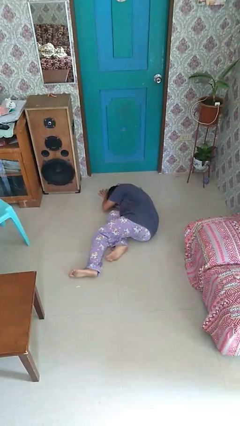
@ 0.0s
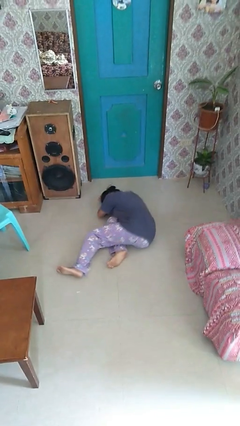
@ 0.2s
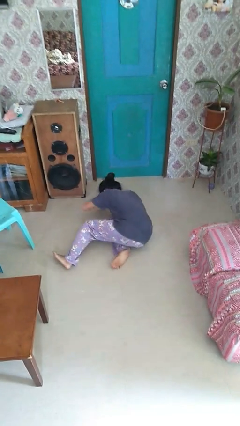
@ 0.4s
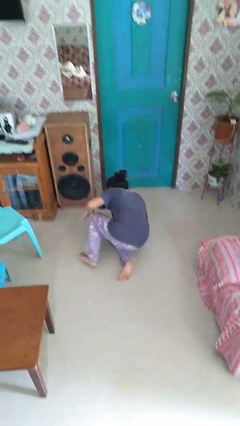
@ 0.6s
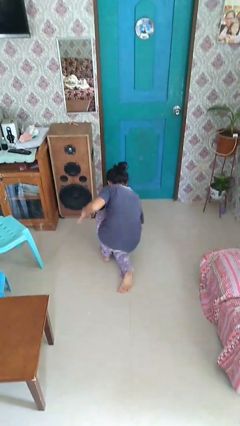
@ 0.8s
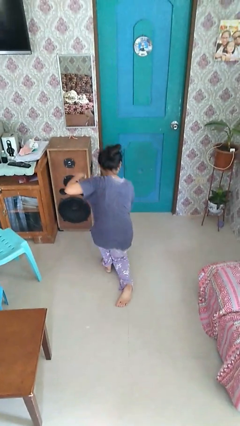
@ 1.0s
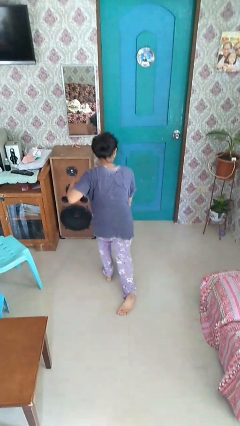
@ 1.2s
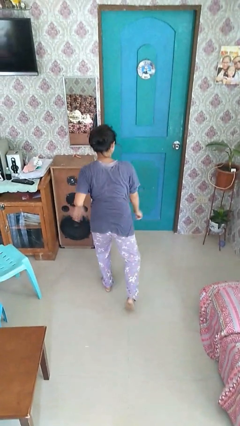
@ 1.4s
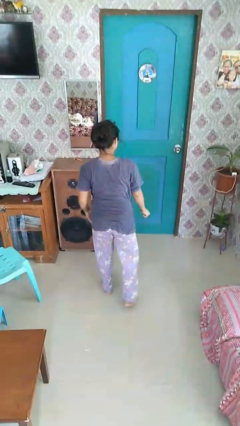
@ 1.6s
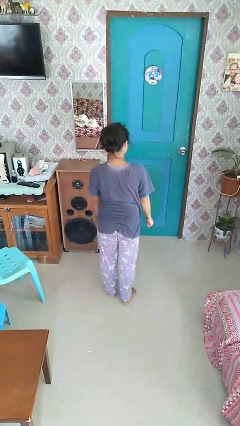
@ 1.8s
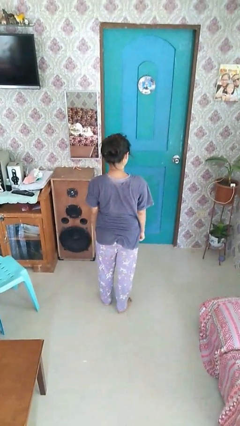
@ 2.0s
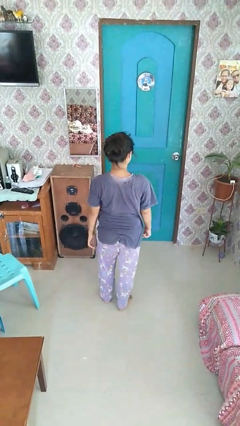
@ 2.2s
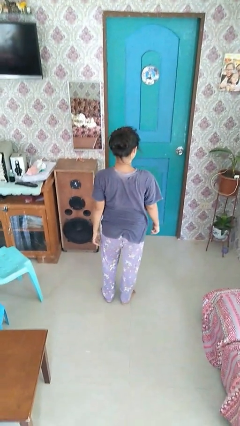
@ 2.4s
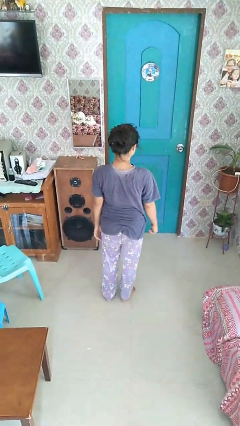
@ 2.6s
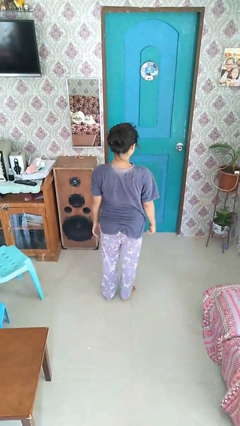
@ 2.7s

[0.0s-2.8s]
person stands up from floor

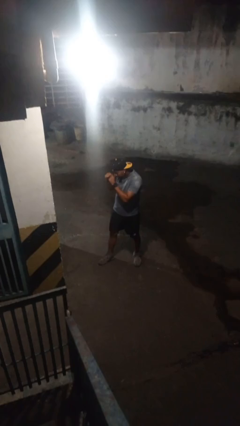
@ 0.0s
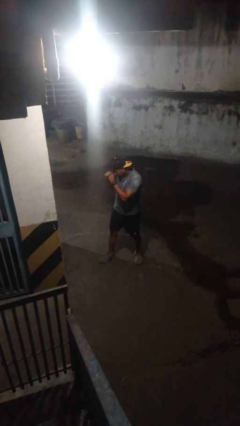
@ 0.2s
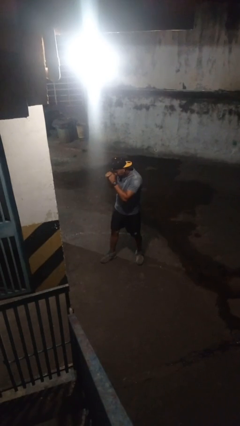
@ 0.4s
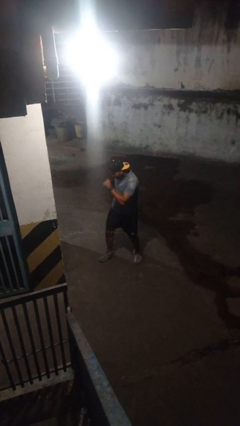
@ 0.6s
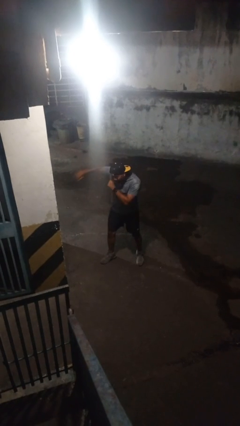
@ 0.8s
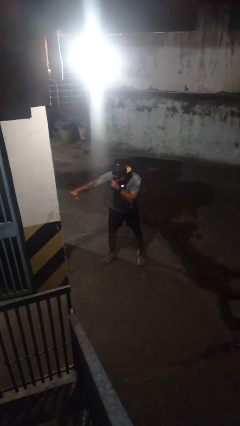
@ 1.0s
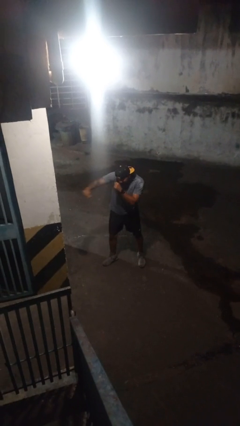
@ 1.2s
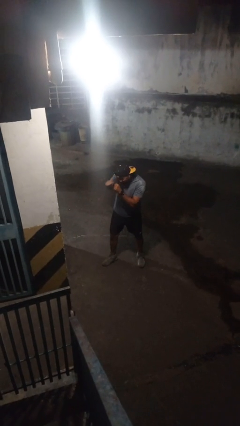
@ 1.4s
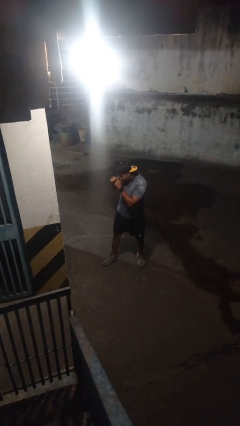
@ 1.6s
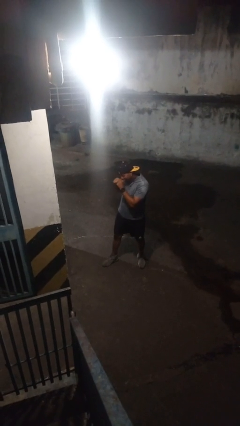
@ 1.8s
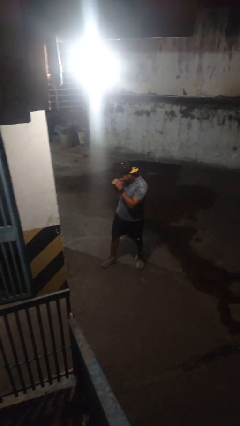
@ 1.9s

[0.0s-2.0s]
person punches

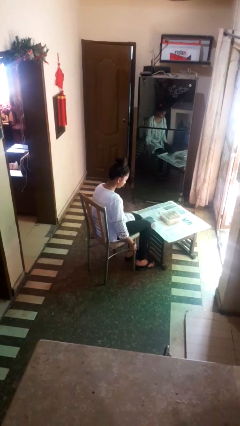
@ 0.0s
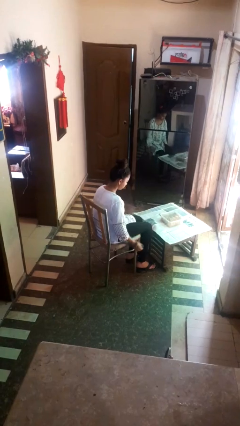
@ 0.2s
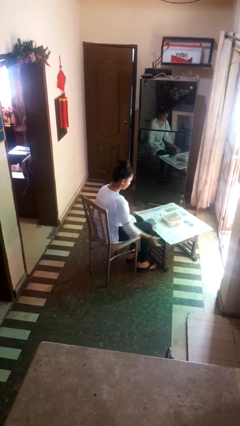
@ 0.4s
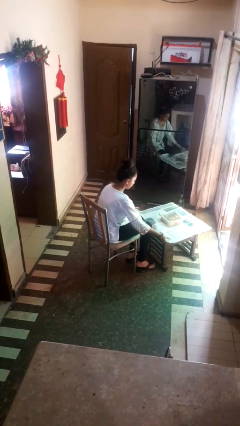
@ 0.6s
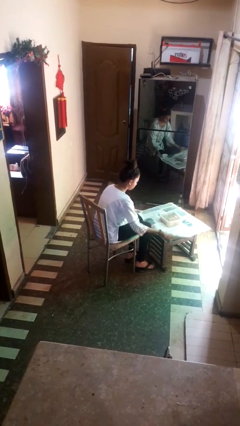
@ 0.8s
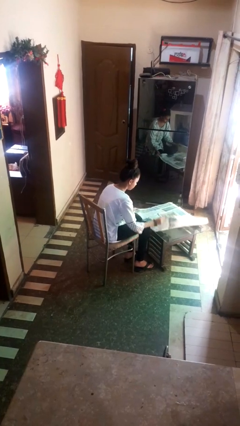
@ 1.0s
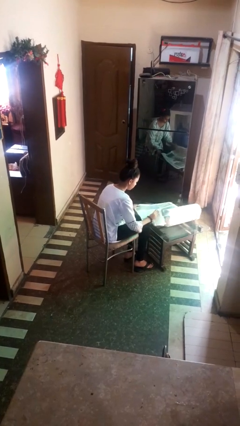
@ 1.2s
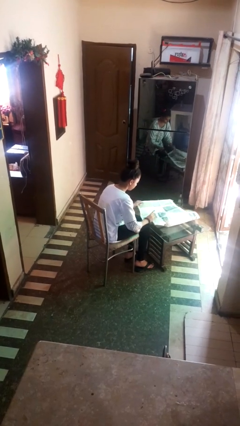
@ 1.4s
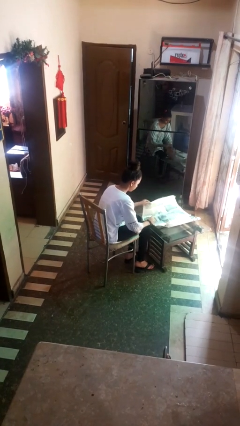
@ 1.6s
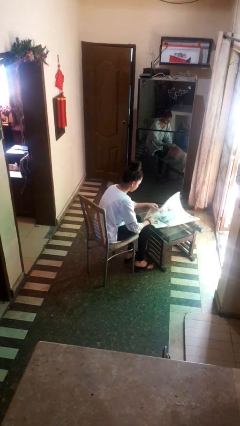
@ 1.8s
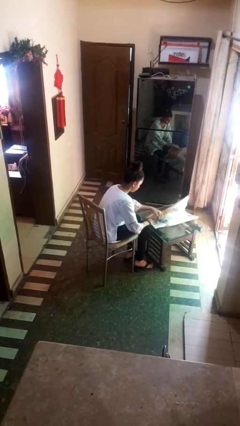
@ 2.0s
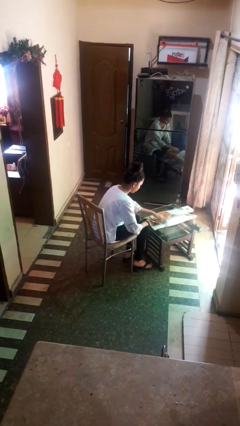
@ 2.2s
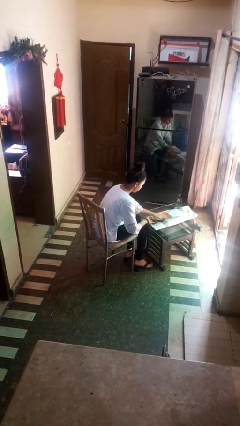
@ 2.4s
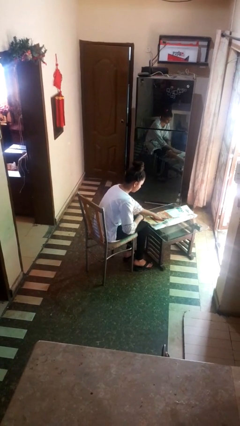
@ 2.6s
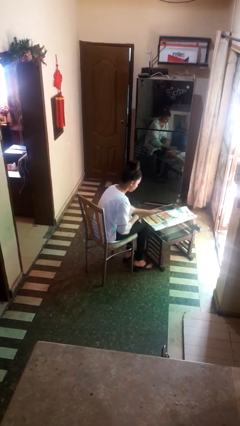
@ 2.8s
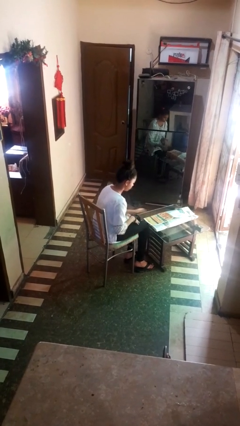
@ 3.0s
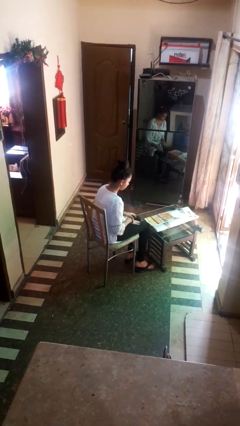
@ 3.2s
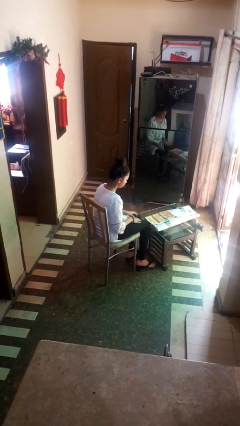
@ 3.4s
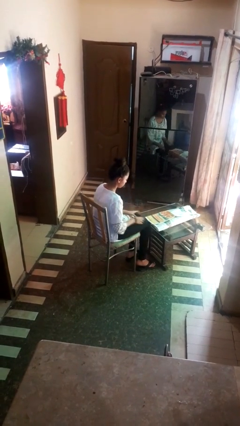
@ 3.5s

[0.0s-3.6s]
person wraps box

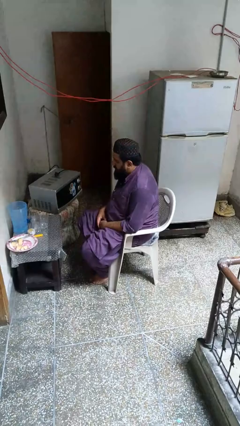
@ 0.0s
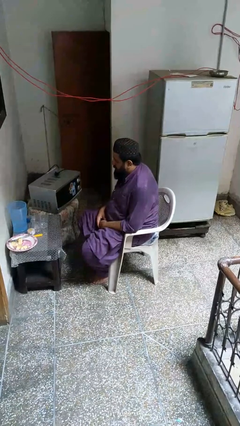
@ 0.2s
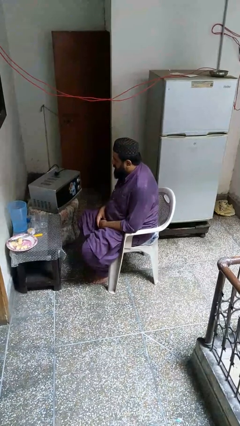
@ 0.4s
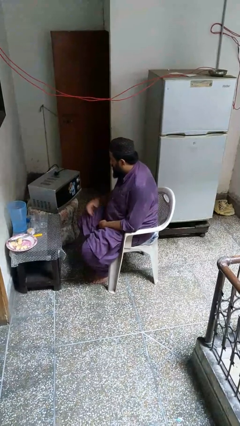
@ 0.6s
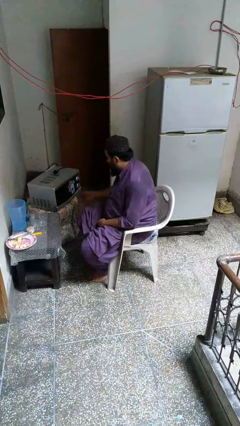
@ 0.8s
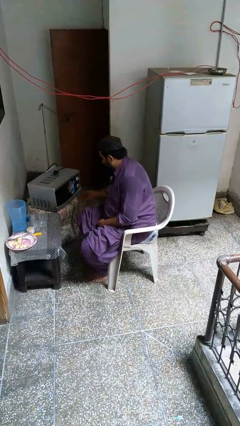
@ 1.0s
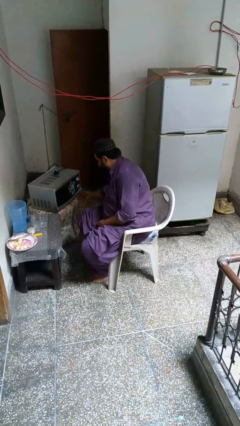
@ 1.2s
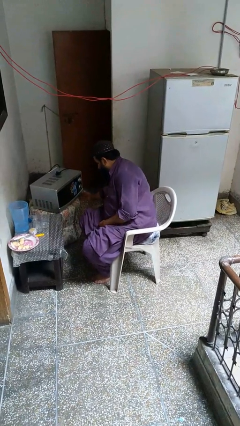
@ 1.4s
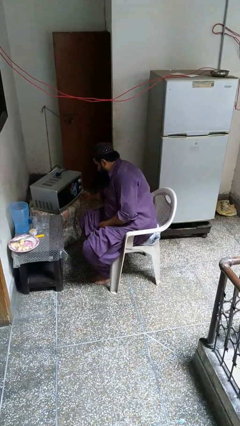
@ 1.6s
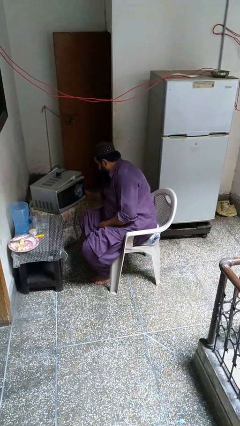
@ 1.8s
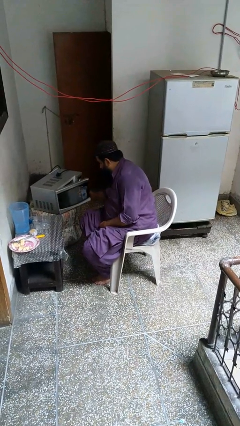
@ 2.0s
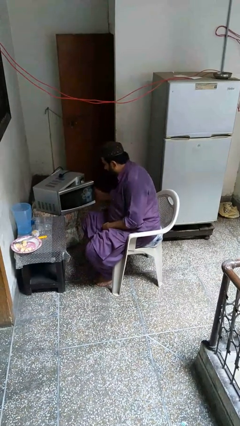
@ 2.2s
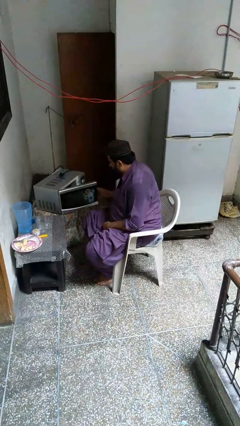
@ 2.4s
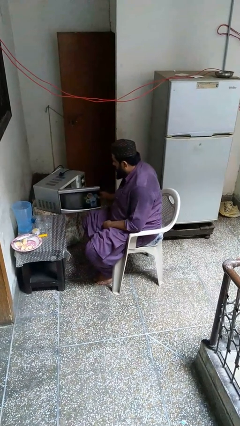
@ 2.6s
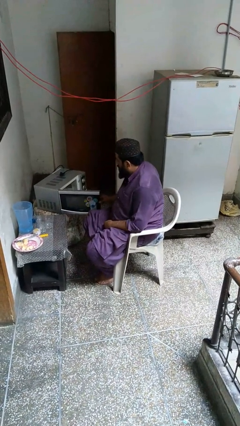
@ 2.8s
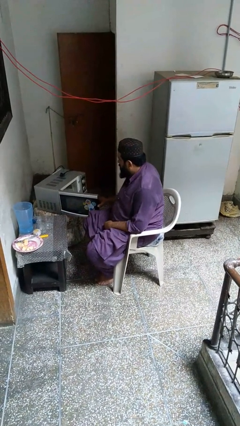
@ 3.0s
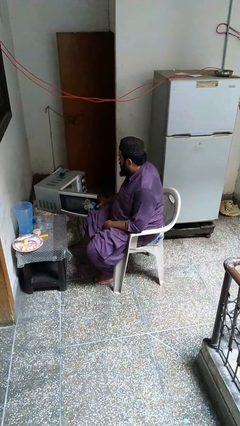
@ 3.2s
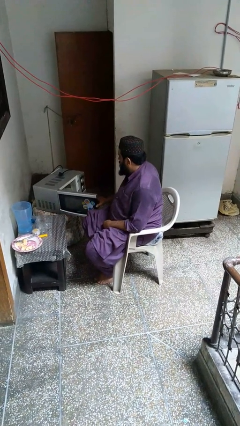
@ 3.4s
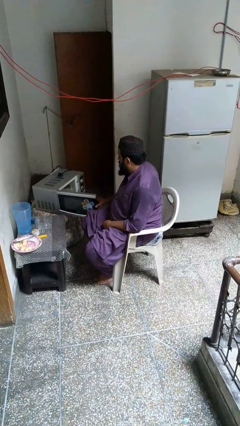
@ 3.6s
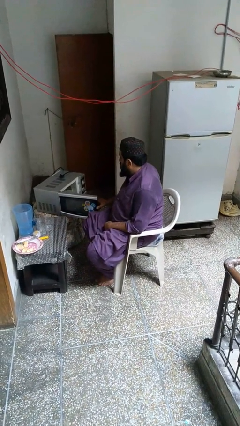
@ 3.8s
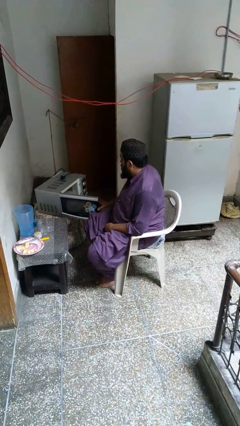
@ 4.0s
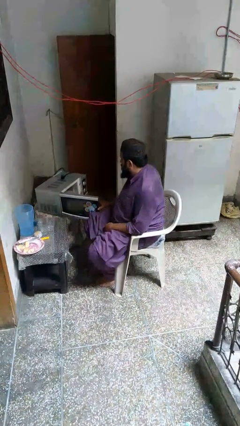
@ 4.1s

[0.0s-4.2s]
person opens microwave

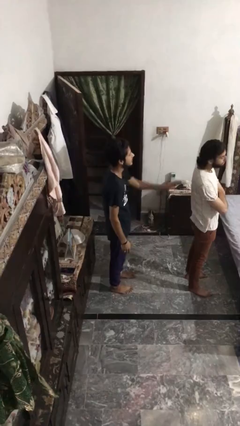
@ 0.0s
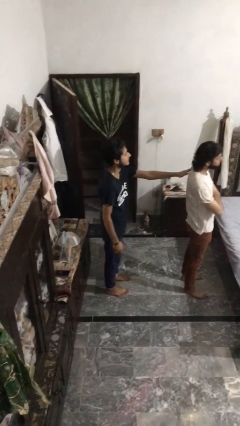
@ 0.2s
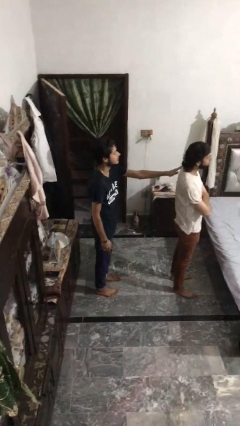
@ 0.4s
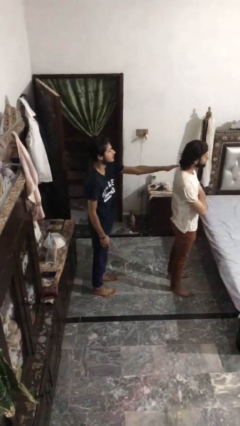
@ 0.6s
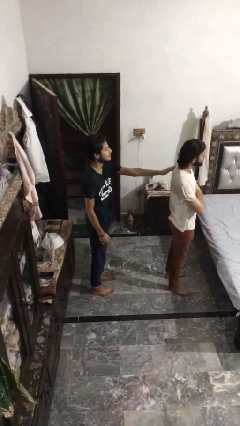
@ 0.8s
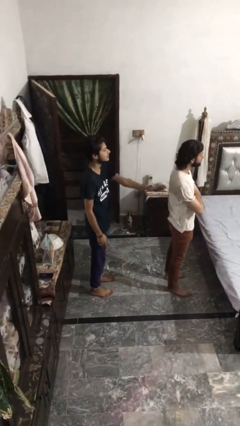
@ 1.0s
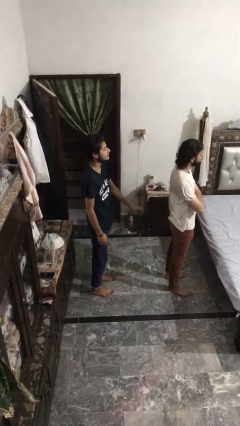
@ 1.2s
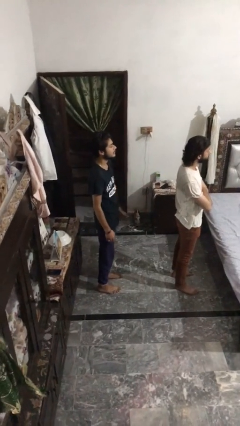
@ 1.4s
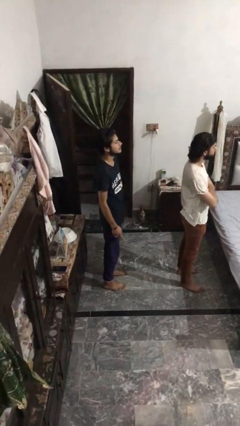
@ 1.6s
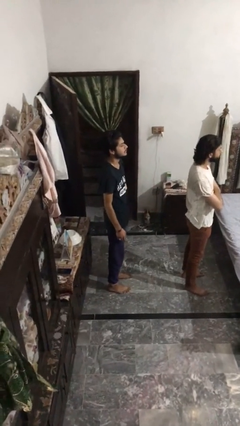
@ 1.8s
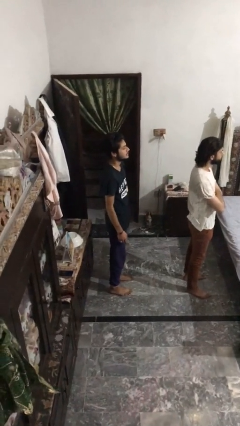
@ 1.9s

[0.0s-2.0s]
person touches back of person

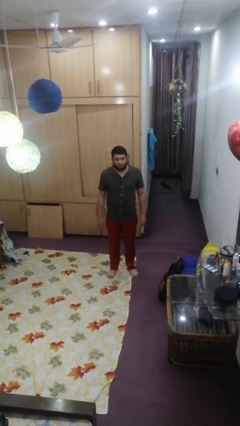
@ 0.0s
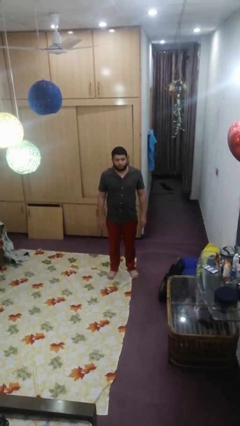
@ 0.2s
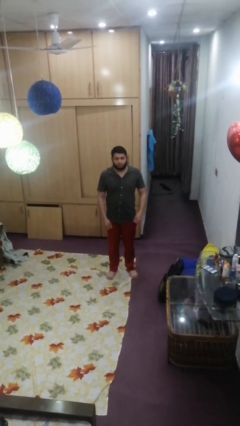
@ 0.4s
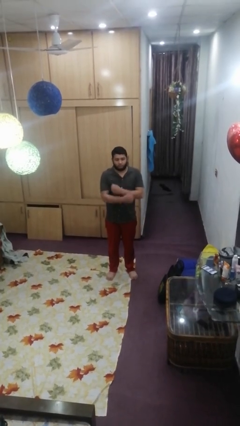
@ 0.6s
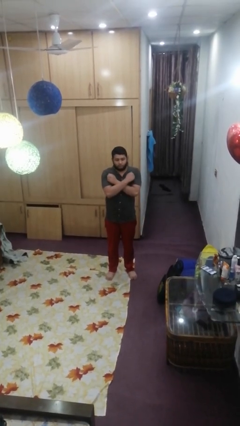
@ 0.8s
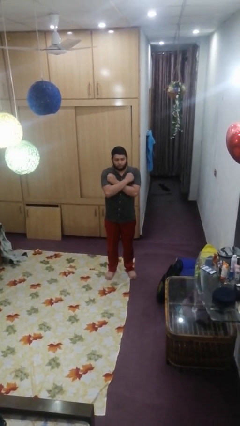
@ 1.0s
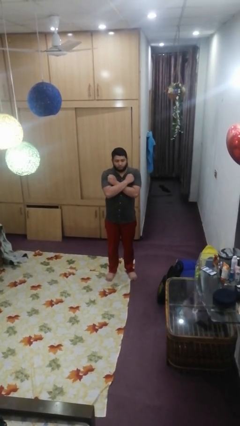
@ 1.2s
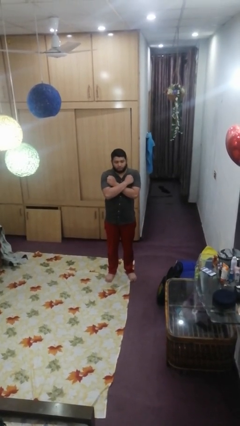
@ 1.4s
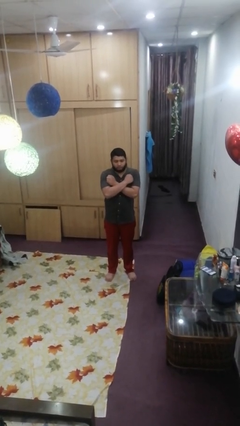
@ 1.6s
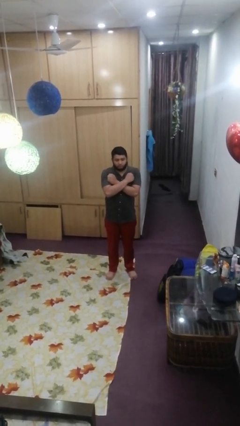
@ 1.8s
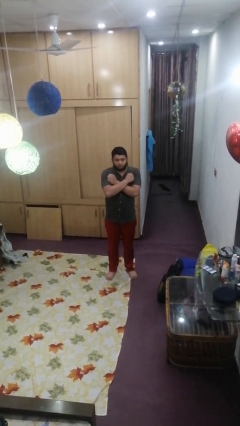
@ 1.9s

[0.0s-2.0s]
person crosses arms

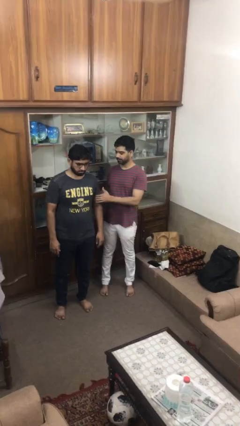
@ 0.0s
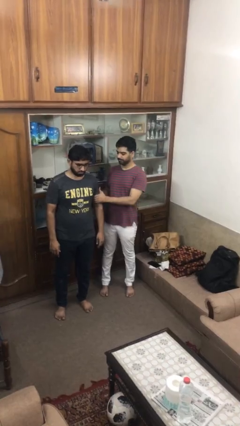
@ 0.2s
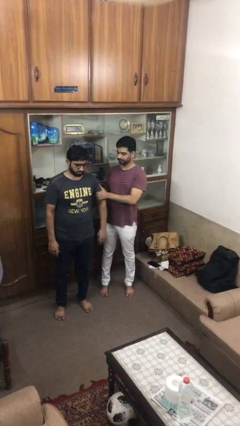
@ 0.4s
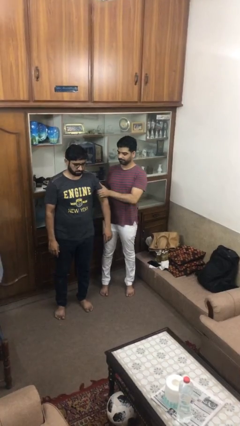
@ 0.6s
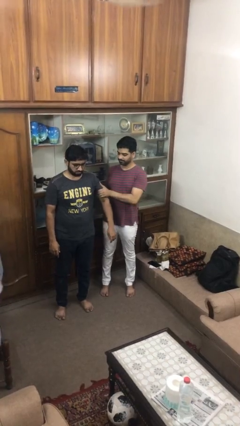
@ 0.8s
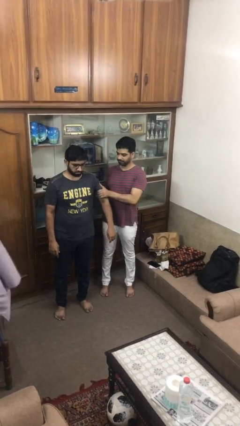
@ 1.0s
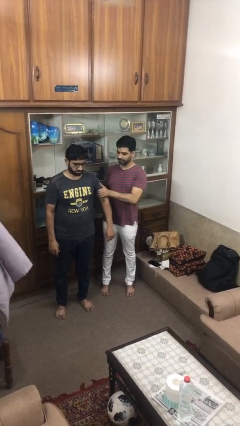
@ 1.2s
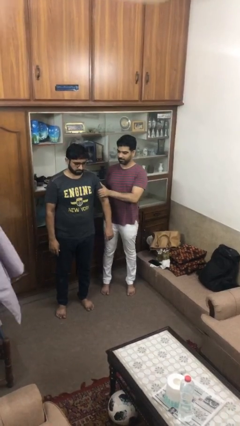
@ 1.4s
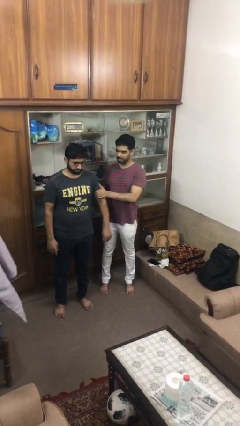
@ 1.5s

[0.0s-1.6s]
person grabs person by bicep
